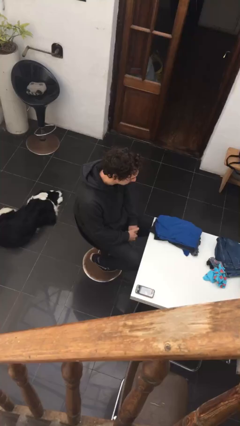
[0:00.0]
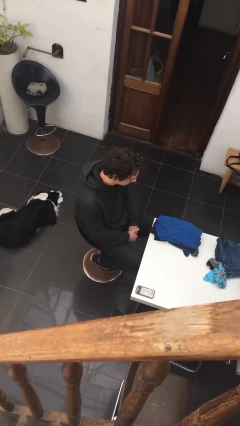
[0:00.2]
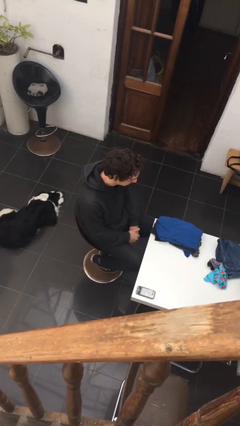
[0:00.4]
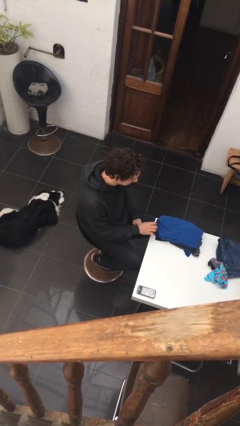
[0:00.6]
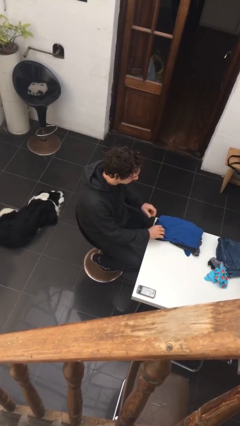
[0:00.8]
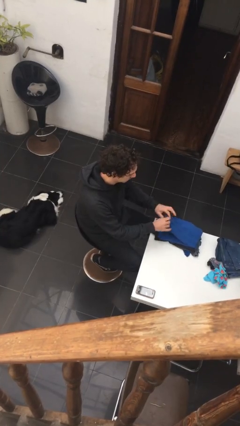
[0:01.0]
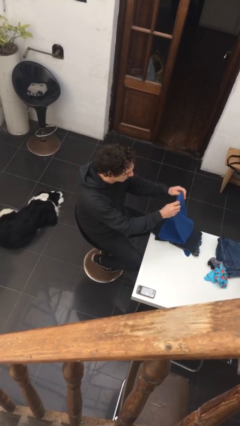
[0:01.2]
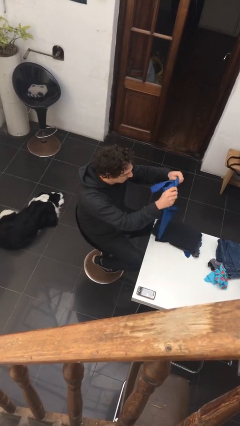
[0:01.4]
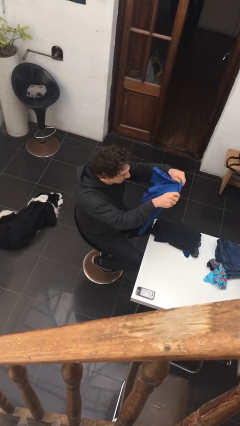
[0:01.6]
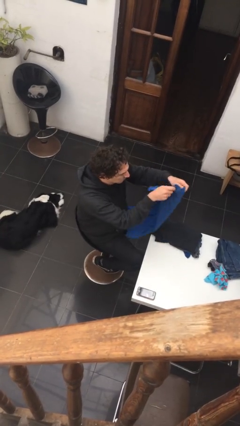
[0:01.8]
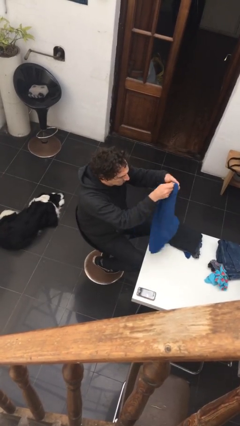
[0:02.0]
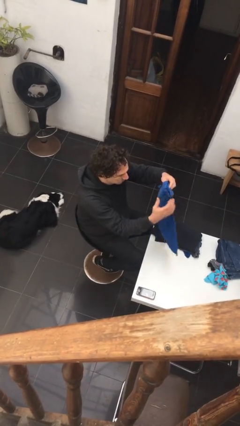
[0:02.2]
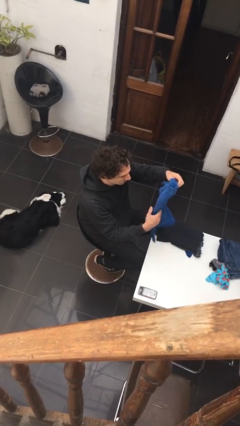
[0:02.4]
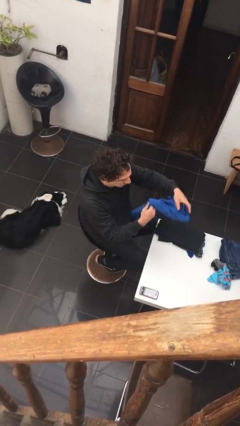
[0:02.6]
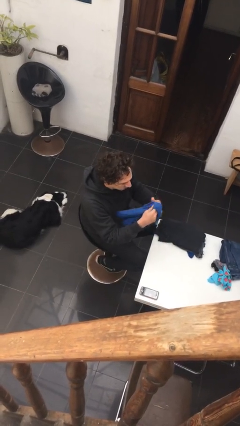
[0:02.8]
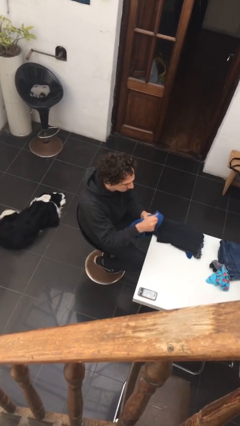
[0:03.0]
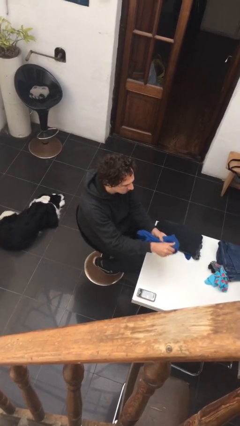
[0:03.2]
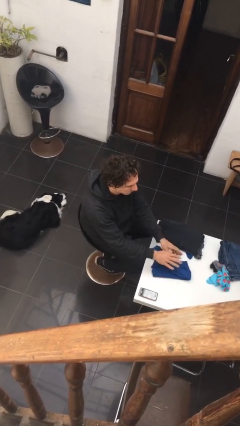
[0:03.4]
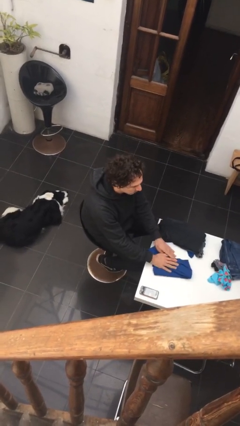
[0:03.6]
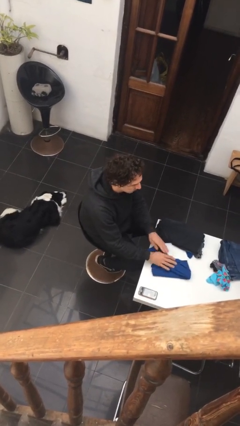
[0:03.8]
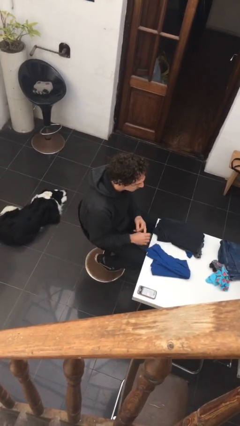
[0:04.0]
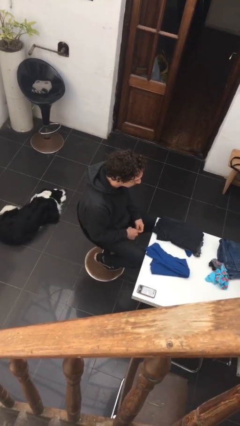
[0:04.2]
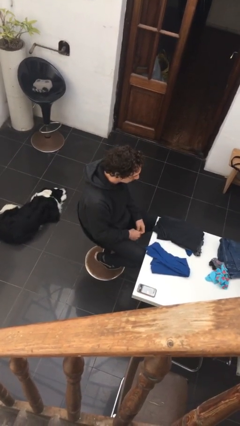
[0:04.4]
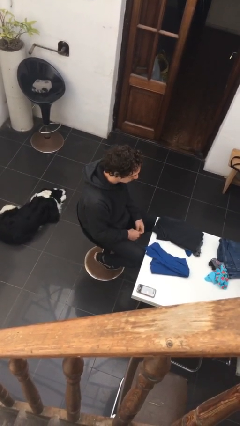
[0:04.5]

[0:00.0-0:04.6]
person folds shirt

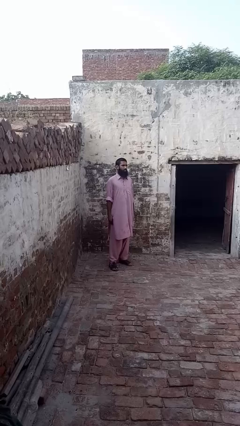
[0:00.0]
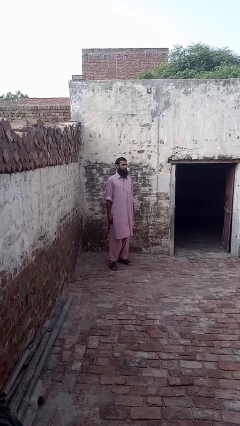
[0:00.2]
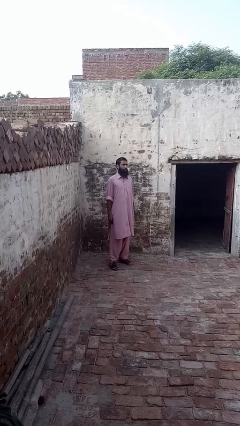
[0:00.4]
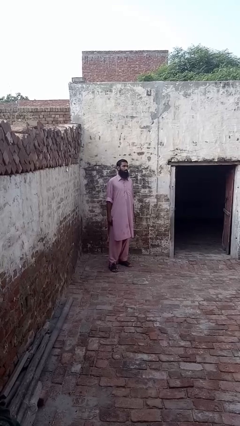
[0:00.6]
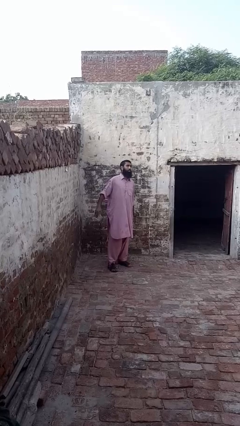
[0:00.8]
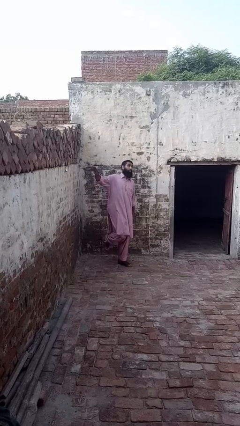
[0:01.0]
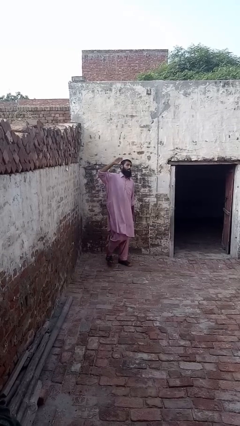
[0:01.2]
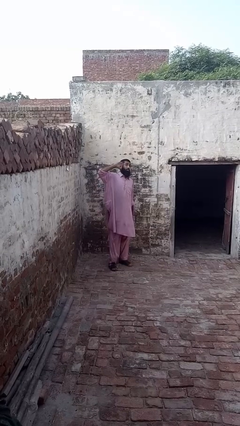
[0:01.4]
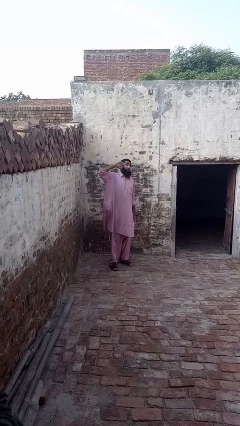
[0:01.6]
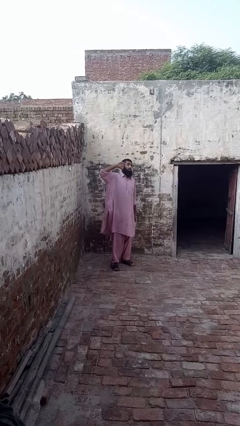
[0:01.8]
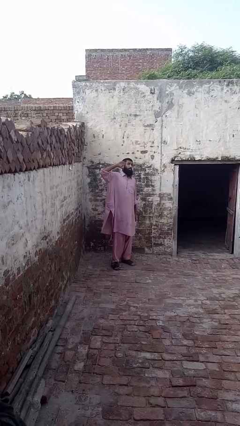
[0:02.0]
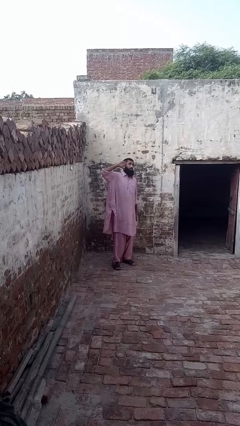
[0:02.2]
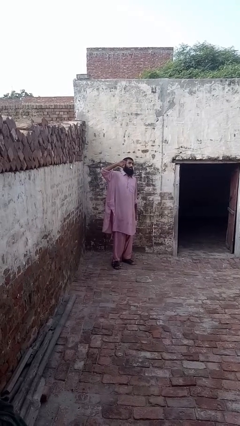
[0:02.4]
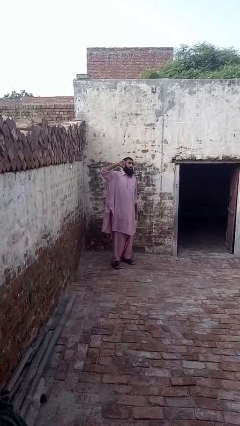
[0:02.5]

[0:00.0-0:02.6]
person salutes

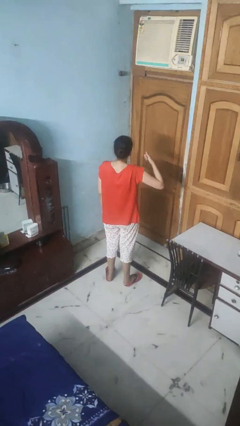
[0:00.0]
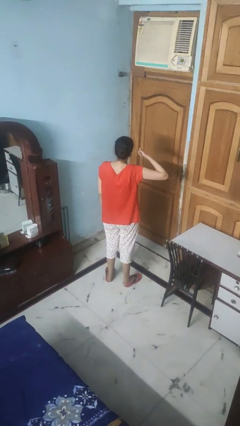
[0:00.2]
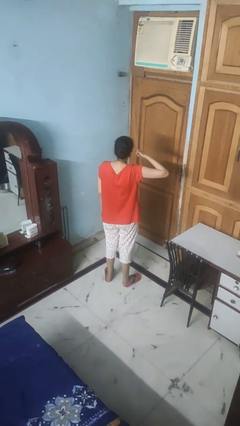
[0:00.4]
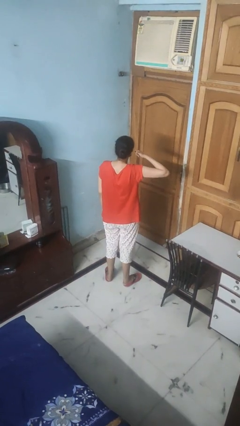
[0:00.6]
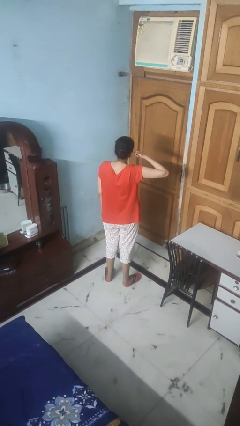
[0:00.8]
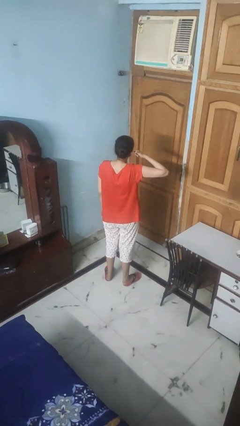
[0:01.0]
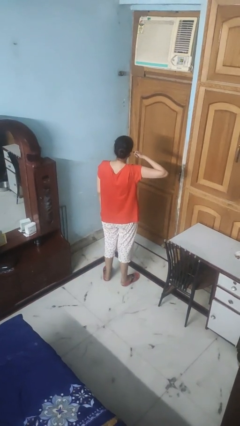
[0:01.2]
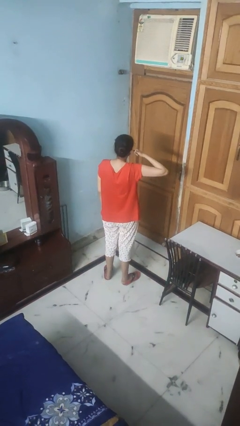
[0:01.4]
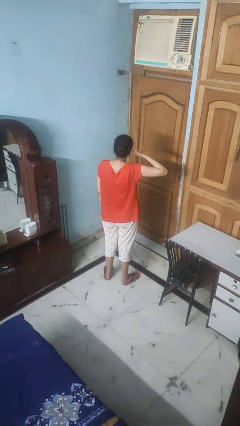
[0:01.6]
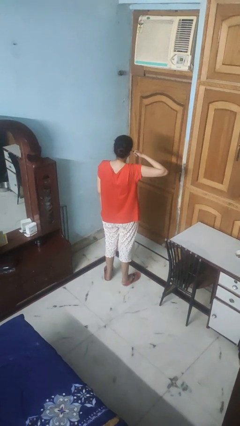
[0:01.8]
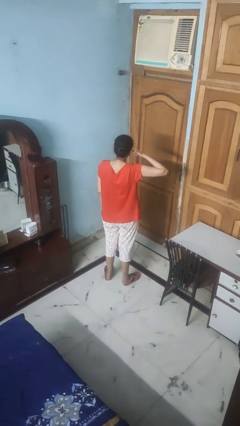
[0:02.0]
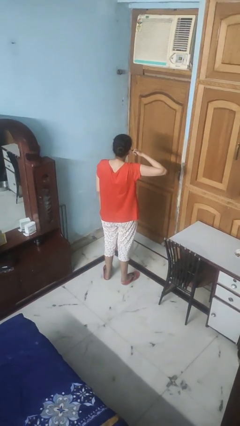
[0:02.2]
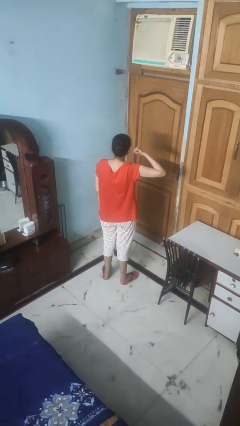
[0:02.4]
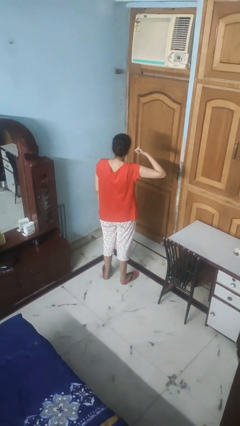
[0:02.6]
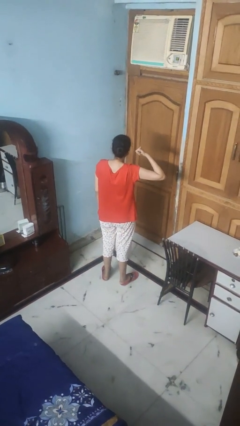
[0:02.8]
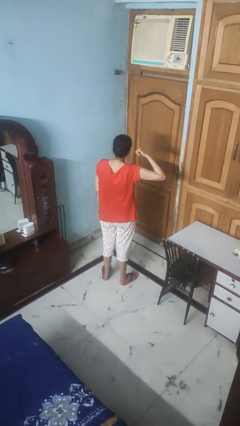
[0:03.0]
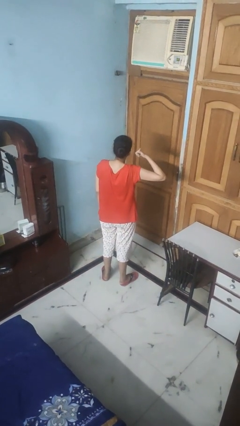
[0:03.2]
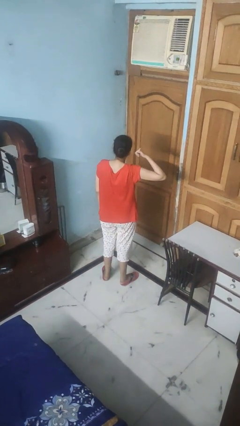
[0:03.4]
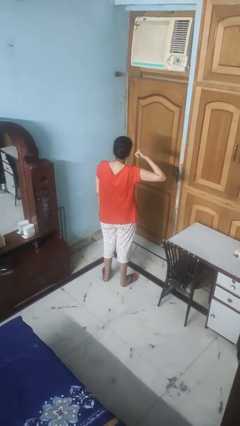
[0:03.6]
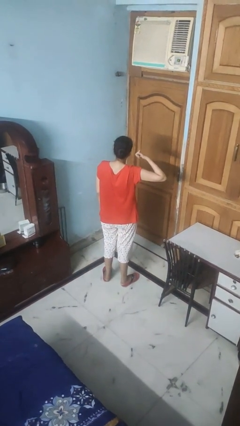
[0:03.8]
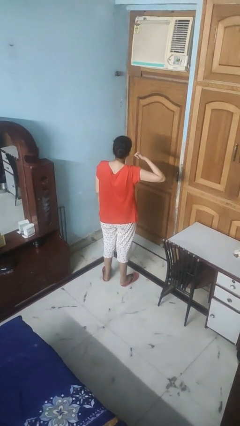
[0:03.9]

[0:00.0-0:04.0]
person gestures call me

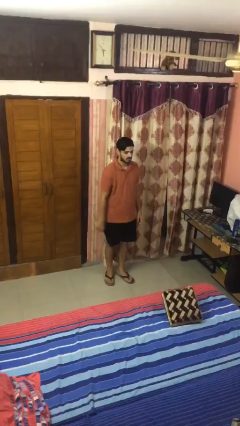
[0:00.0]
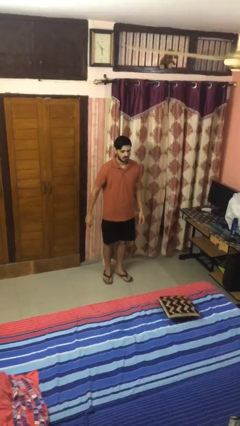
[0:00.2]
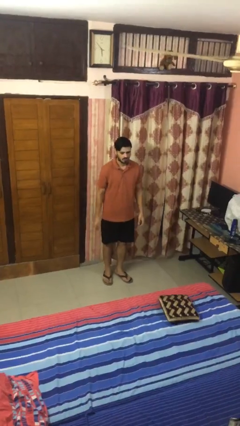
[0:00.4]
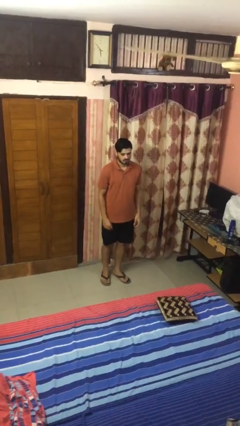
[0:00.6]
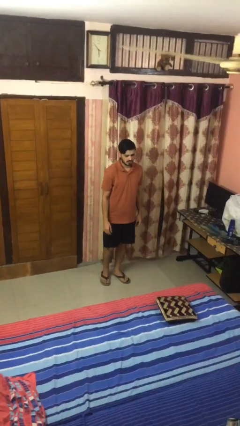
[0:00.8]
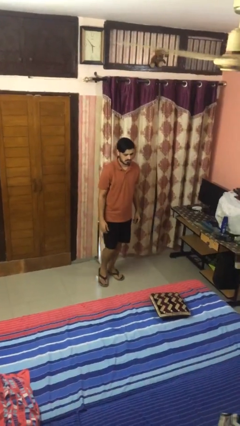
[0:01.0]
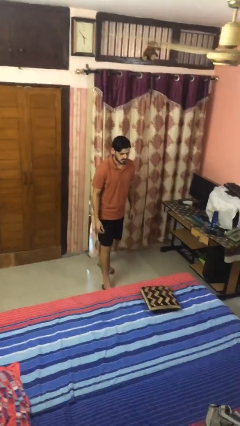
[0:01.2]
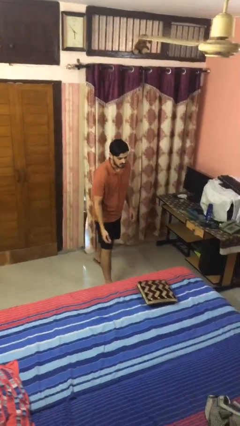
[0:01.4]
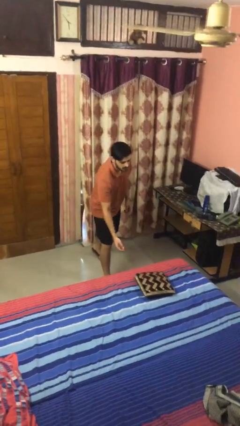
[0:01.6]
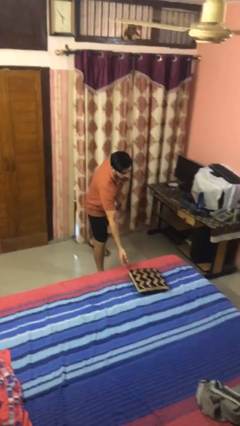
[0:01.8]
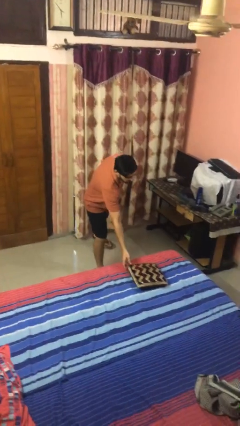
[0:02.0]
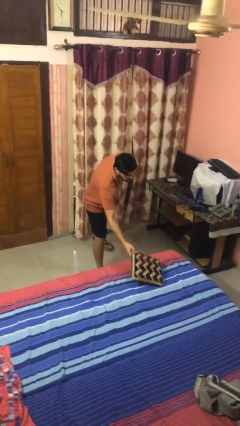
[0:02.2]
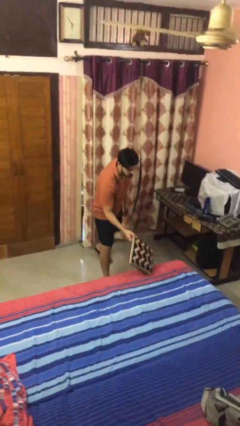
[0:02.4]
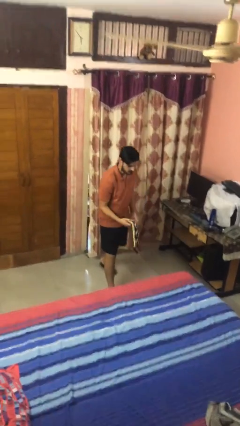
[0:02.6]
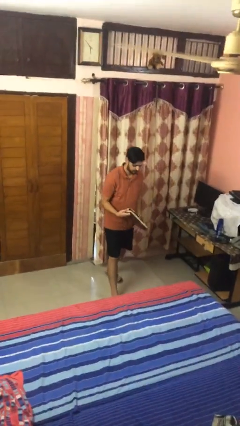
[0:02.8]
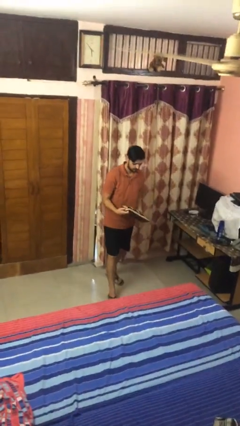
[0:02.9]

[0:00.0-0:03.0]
person picks up object from bed

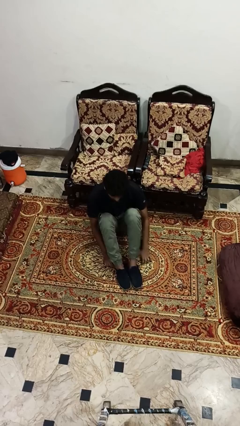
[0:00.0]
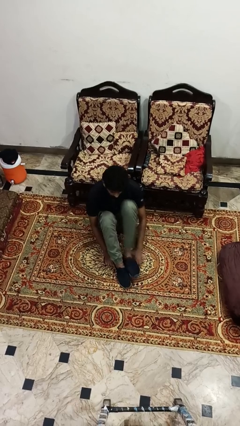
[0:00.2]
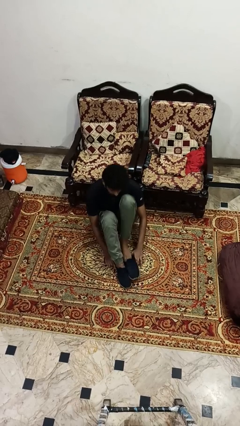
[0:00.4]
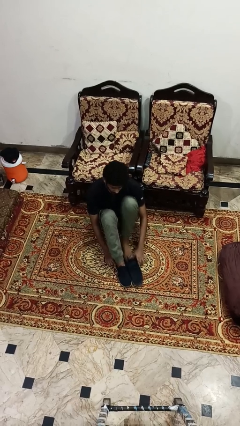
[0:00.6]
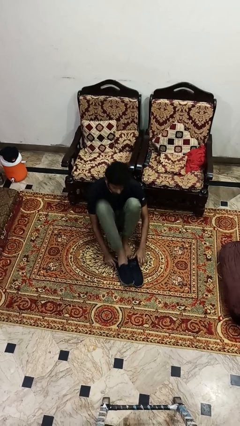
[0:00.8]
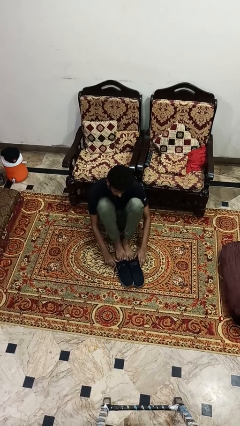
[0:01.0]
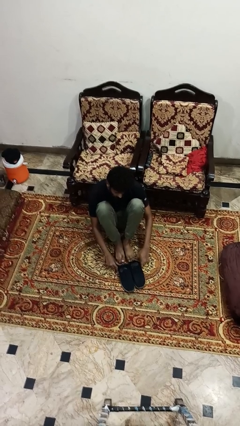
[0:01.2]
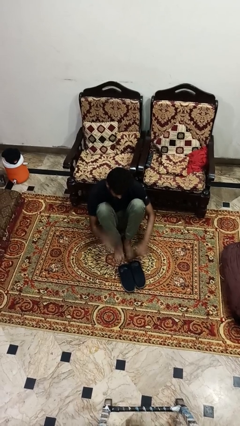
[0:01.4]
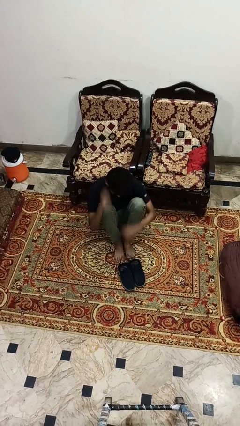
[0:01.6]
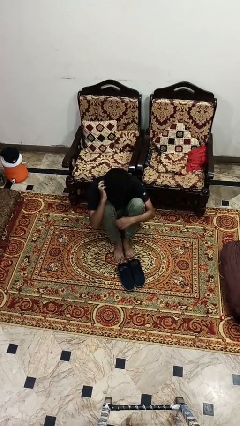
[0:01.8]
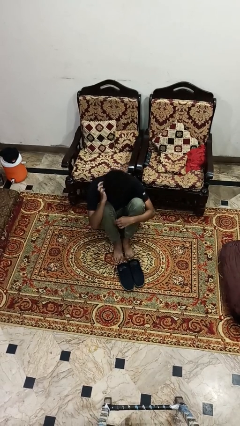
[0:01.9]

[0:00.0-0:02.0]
person takes off shoes

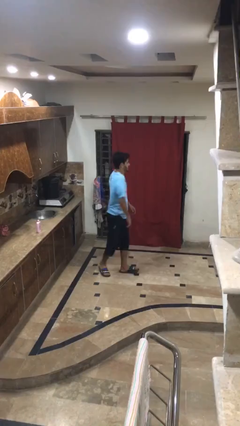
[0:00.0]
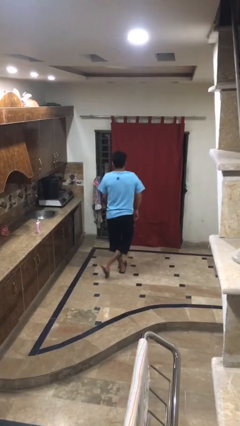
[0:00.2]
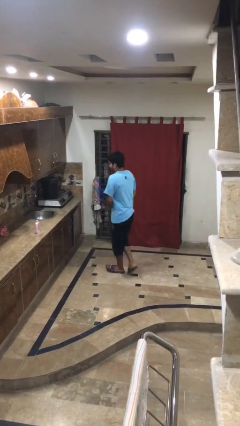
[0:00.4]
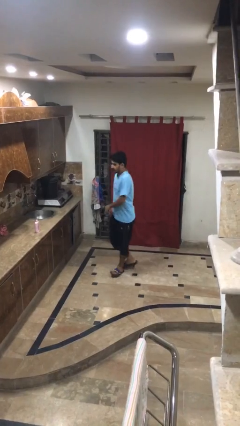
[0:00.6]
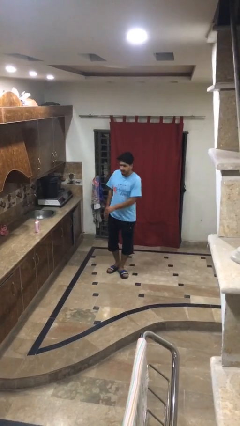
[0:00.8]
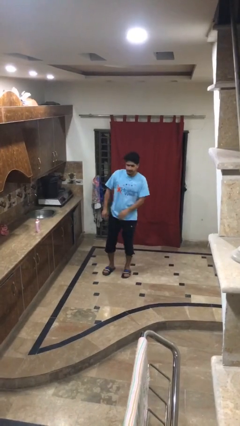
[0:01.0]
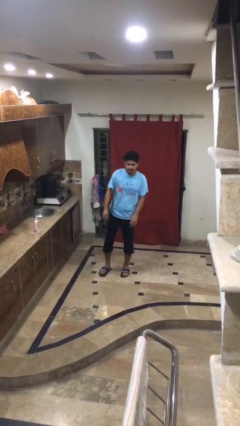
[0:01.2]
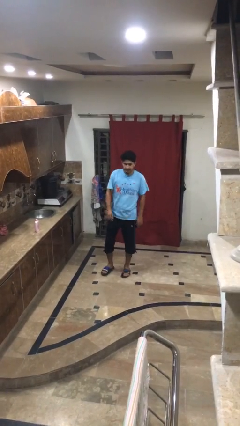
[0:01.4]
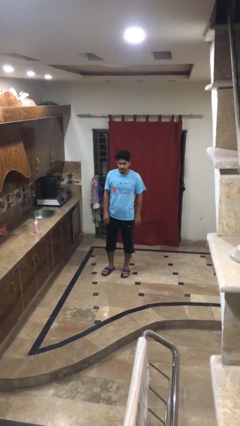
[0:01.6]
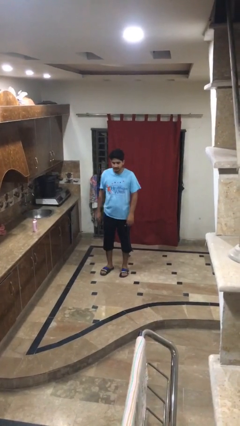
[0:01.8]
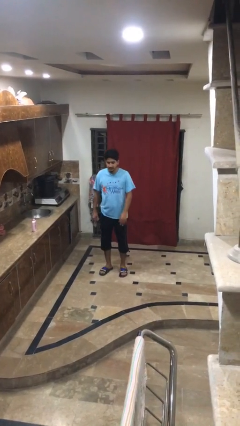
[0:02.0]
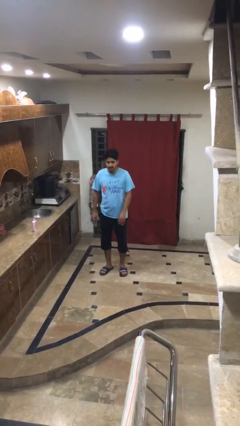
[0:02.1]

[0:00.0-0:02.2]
person twirls
